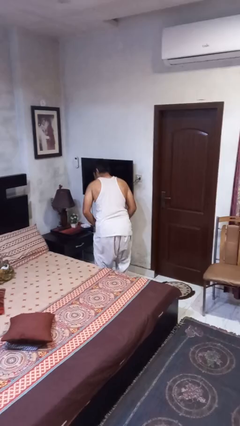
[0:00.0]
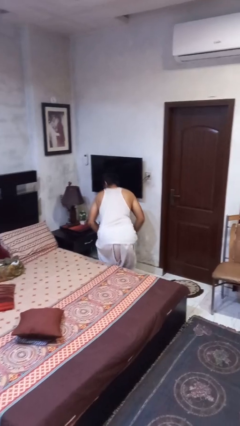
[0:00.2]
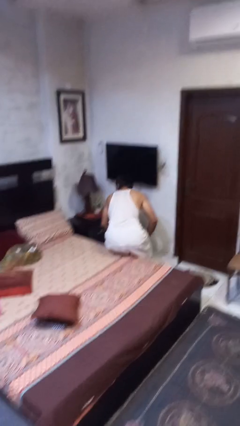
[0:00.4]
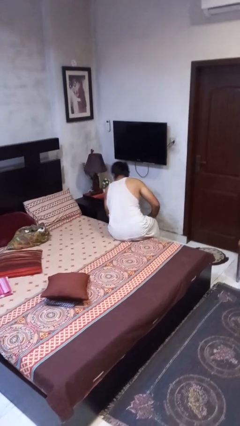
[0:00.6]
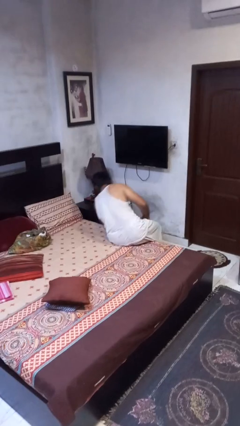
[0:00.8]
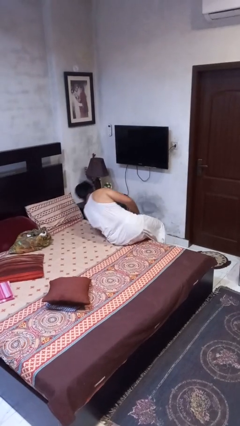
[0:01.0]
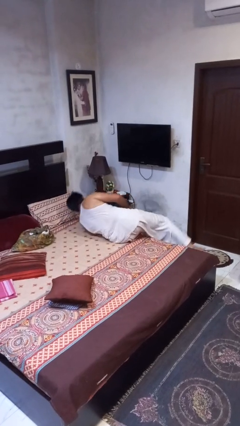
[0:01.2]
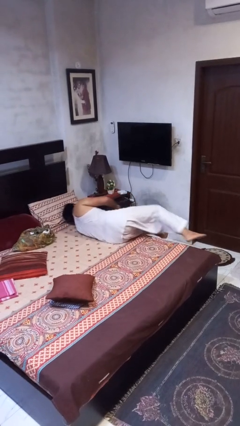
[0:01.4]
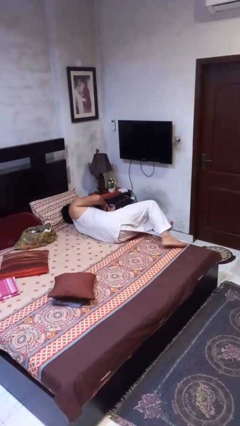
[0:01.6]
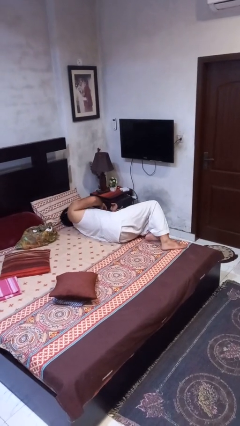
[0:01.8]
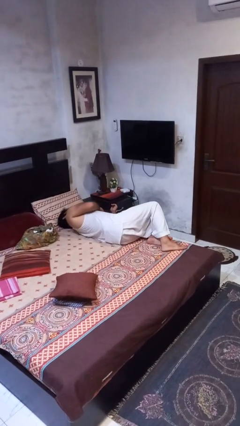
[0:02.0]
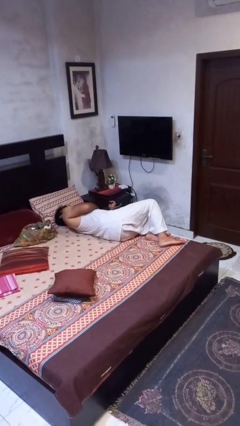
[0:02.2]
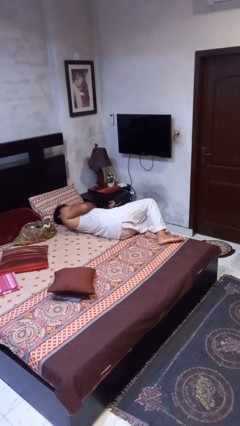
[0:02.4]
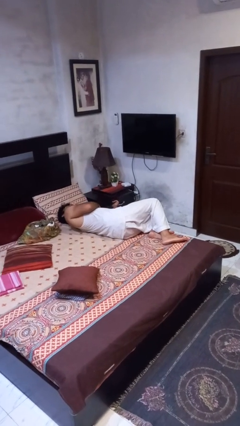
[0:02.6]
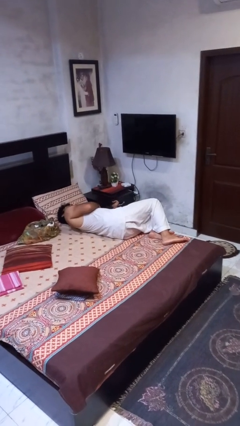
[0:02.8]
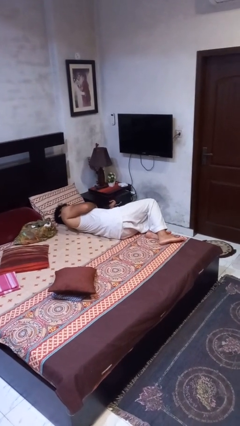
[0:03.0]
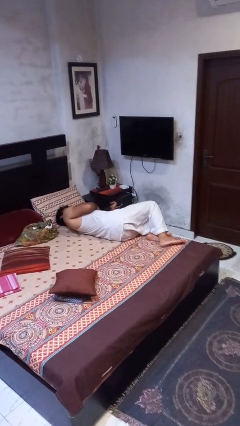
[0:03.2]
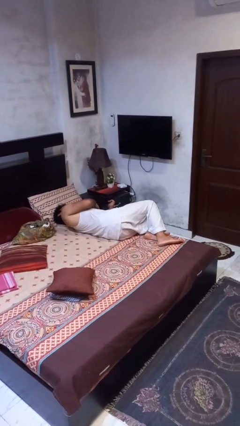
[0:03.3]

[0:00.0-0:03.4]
person lies down on bed

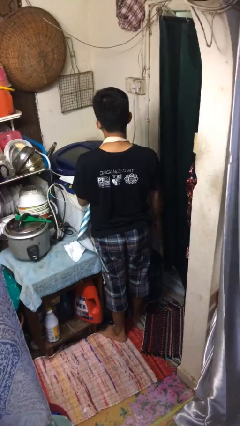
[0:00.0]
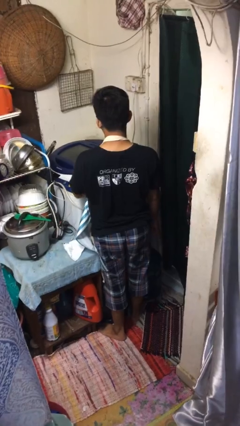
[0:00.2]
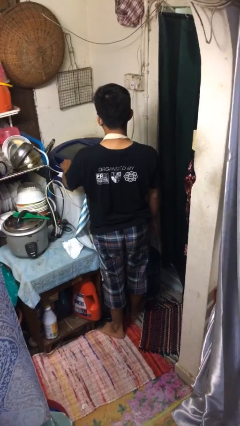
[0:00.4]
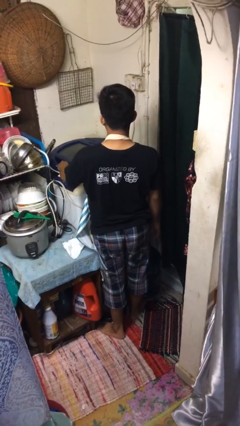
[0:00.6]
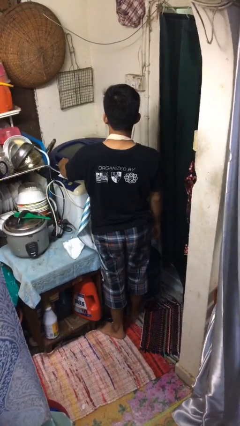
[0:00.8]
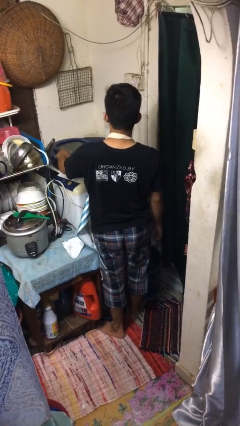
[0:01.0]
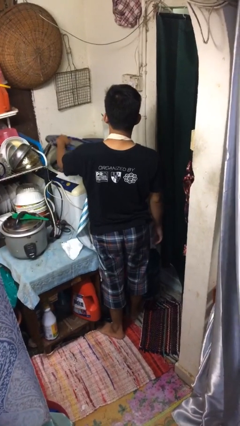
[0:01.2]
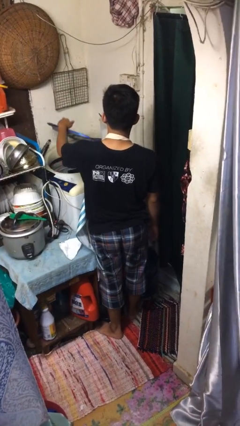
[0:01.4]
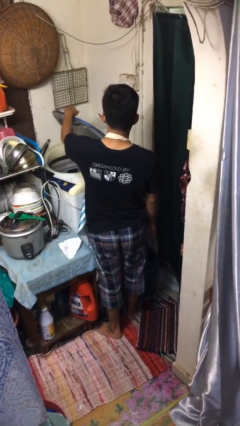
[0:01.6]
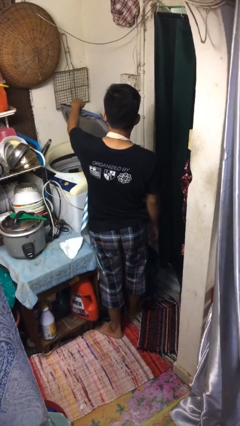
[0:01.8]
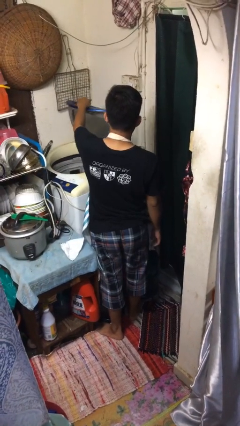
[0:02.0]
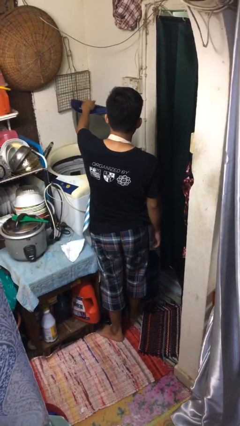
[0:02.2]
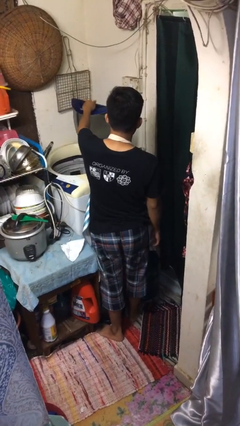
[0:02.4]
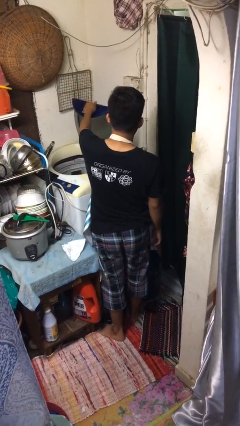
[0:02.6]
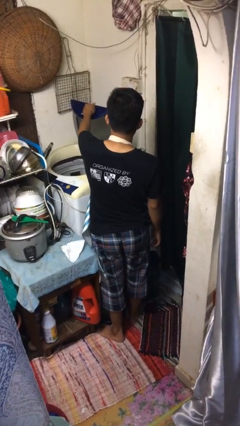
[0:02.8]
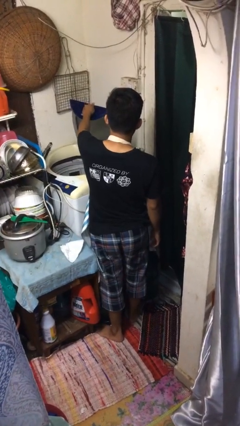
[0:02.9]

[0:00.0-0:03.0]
person opens clothes washer

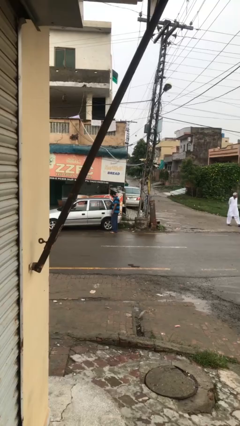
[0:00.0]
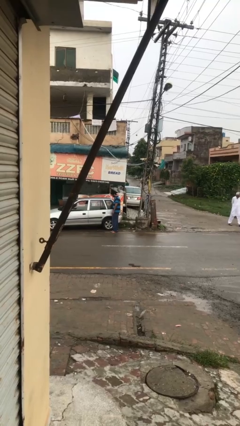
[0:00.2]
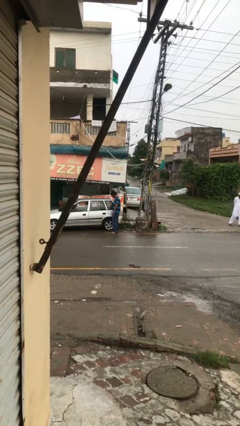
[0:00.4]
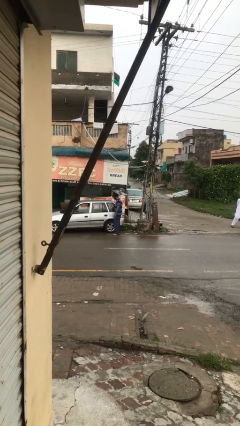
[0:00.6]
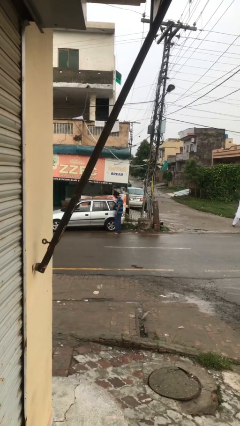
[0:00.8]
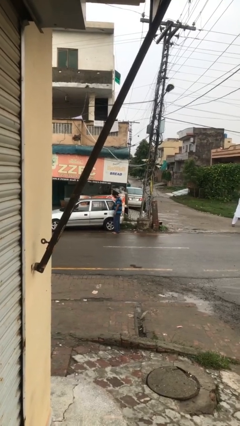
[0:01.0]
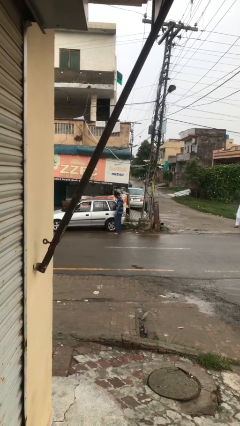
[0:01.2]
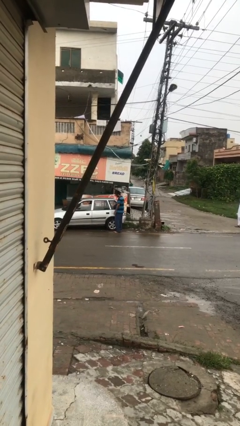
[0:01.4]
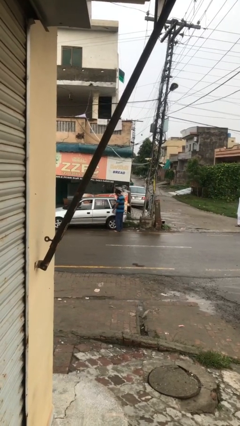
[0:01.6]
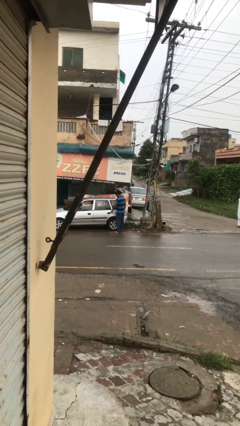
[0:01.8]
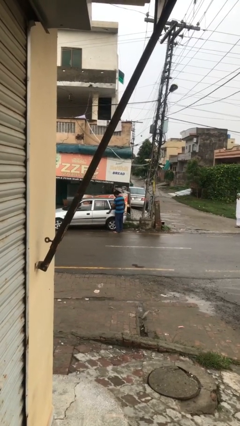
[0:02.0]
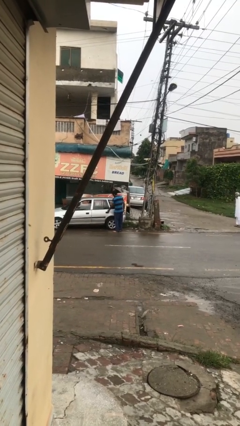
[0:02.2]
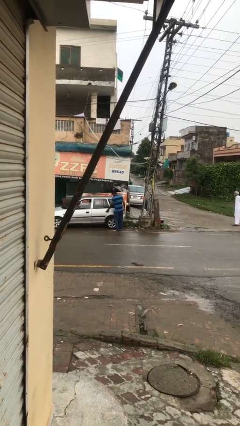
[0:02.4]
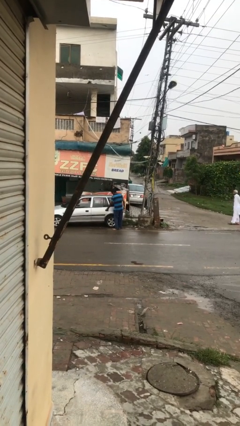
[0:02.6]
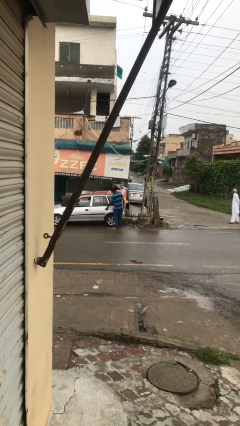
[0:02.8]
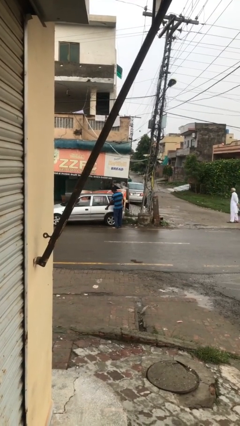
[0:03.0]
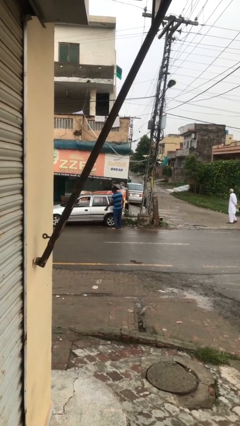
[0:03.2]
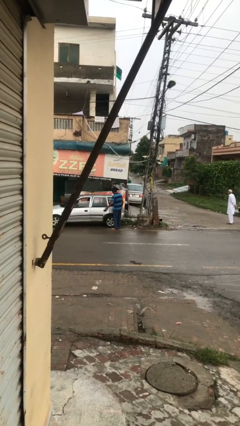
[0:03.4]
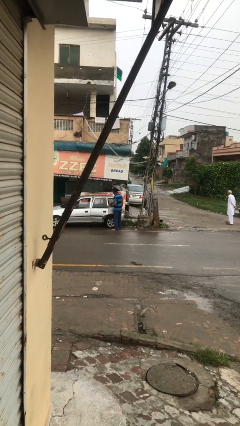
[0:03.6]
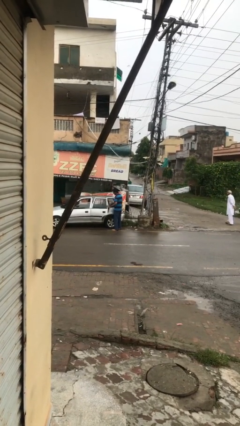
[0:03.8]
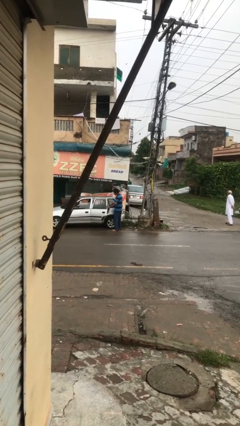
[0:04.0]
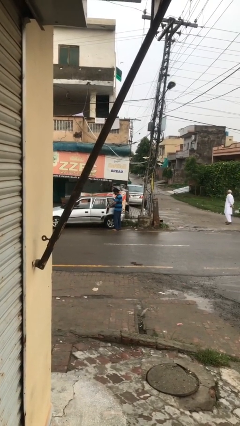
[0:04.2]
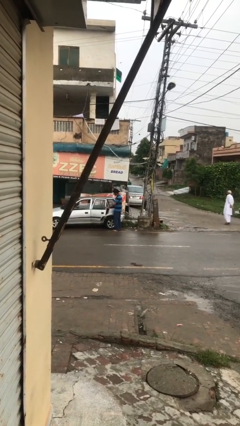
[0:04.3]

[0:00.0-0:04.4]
person opens car door

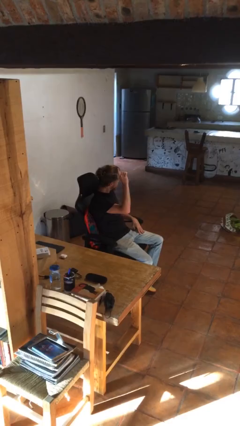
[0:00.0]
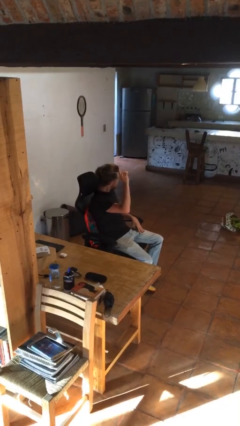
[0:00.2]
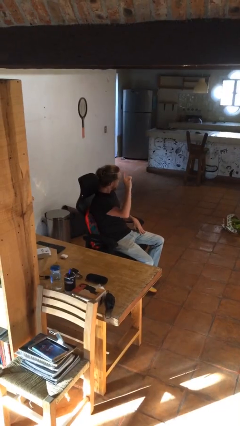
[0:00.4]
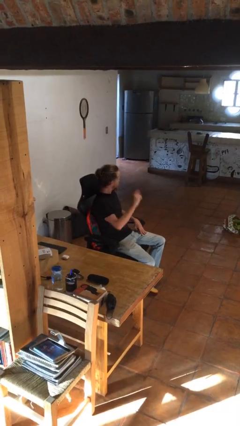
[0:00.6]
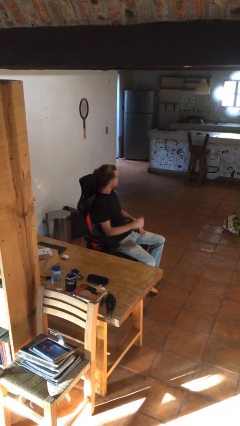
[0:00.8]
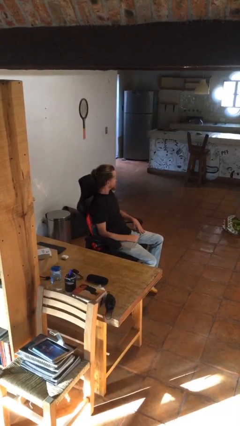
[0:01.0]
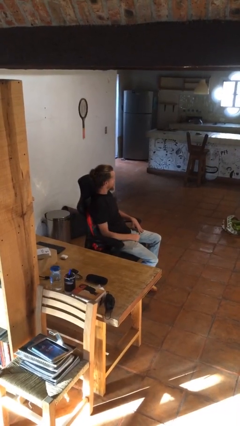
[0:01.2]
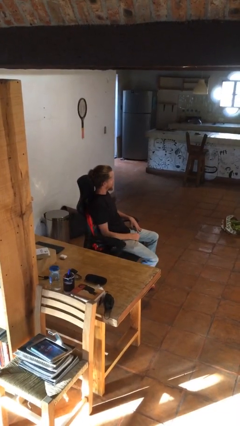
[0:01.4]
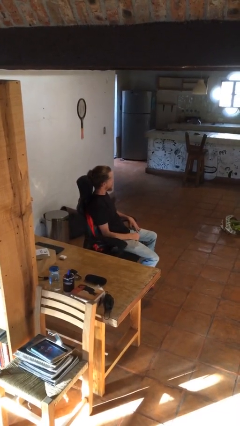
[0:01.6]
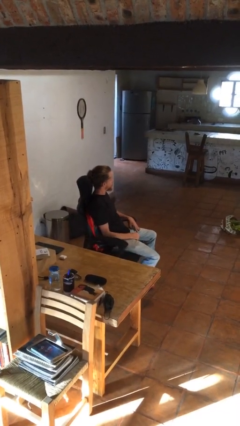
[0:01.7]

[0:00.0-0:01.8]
person gestures lower hand

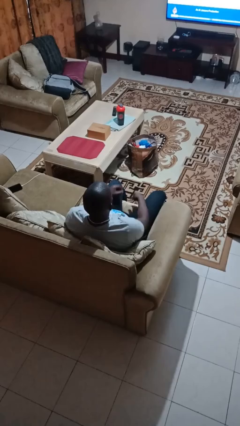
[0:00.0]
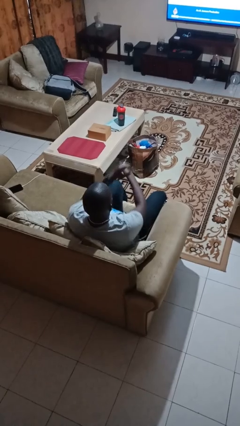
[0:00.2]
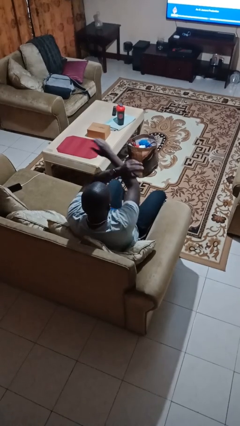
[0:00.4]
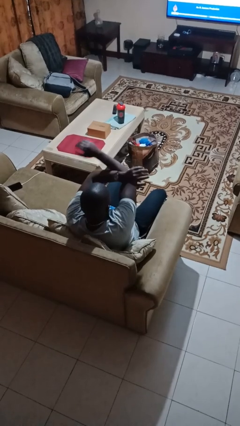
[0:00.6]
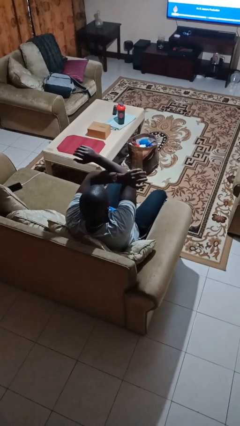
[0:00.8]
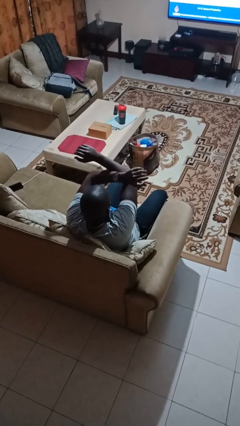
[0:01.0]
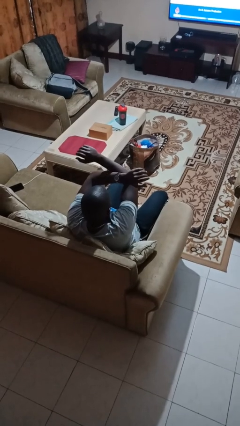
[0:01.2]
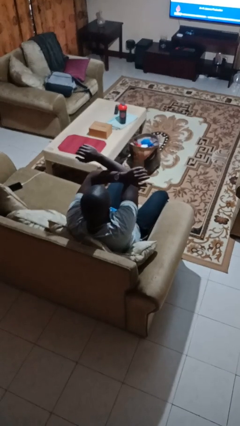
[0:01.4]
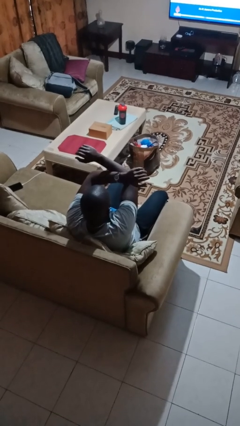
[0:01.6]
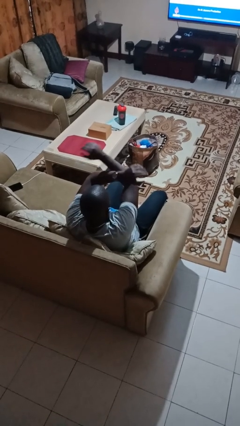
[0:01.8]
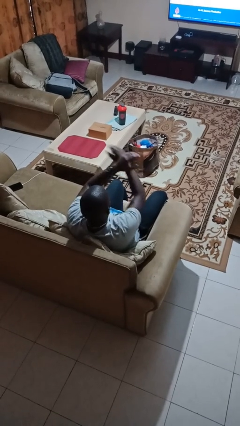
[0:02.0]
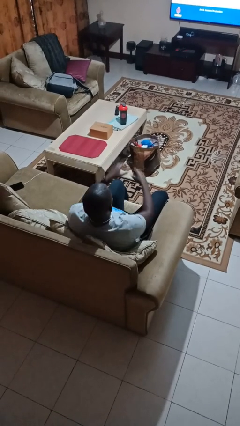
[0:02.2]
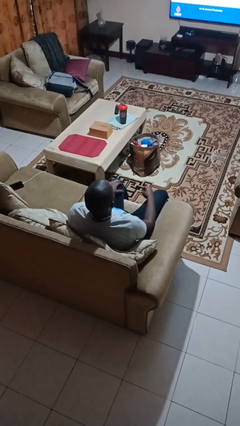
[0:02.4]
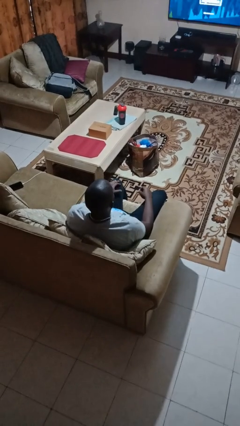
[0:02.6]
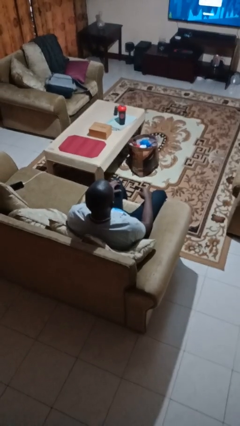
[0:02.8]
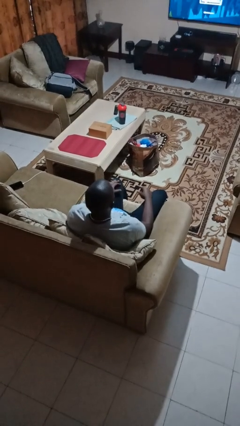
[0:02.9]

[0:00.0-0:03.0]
person gestures arms x

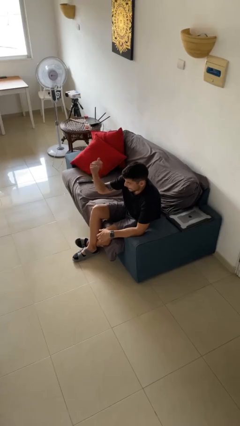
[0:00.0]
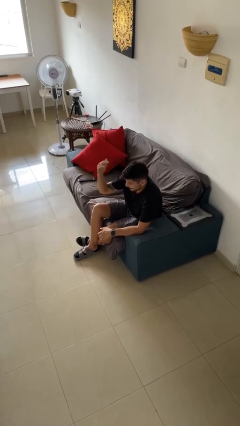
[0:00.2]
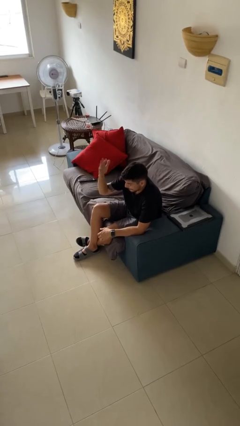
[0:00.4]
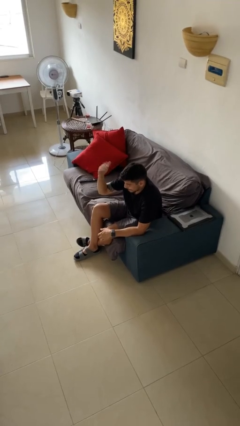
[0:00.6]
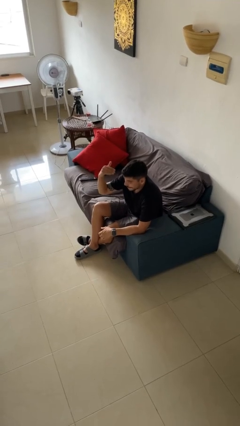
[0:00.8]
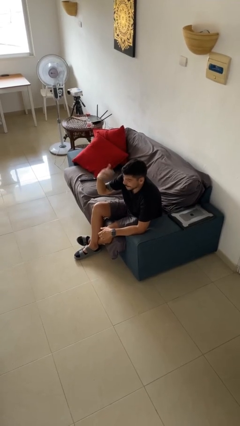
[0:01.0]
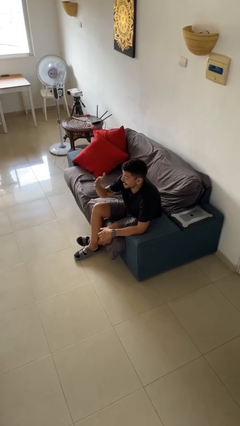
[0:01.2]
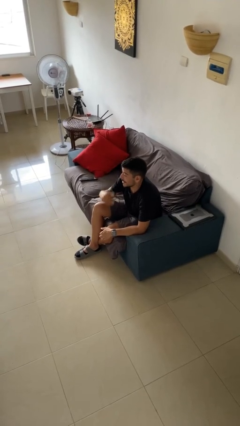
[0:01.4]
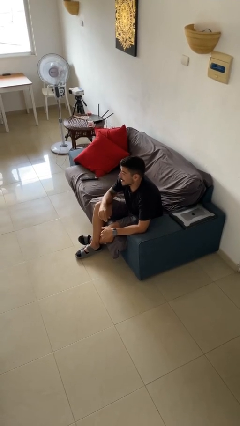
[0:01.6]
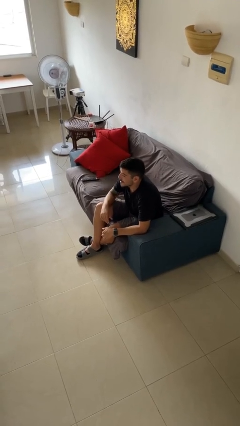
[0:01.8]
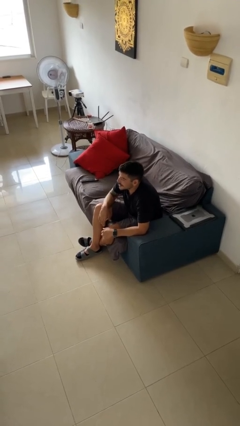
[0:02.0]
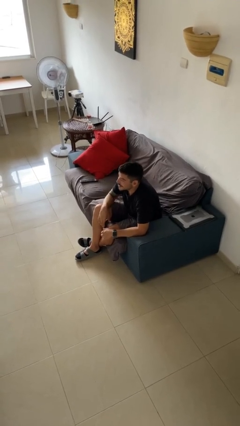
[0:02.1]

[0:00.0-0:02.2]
person gestures come here
